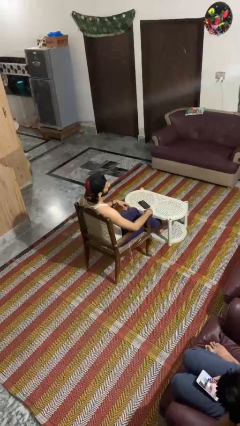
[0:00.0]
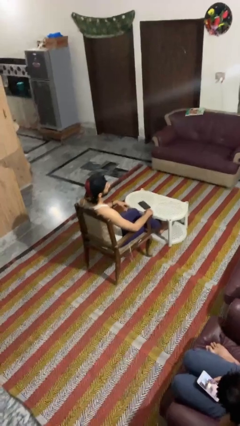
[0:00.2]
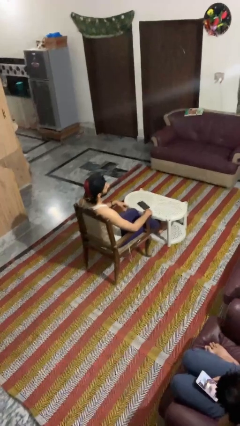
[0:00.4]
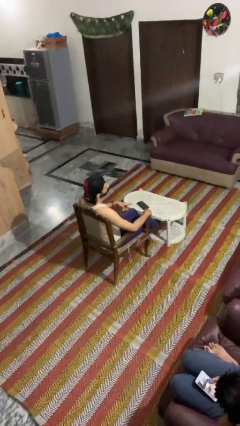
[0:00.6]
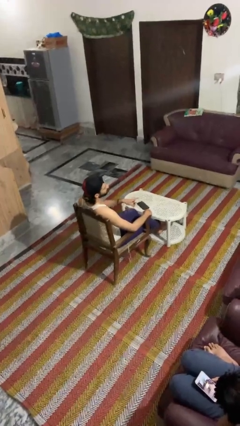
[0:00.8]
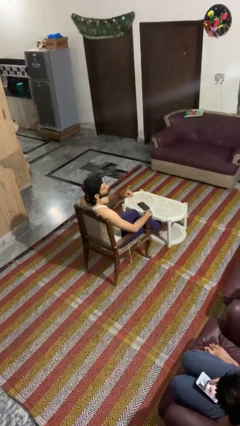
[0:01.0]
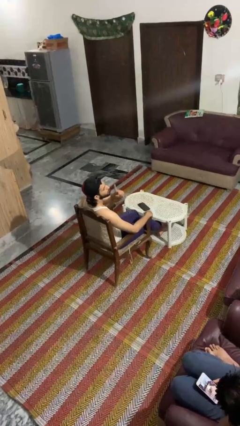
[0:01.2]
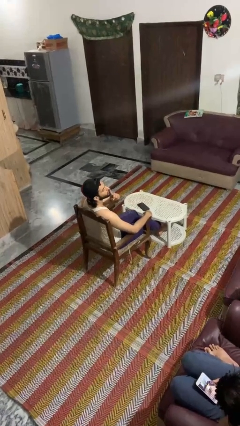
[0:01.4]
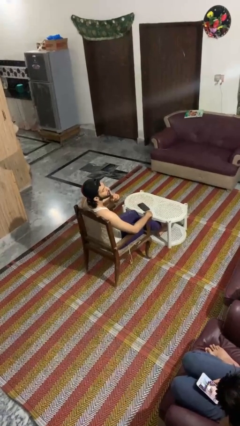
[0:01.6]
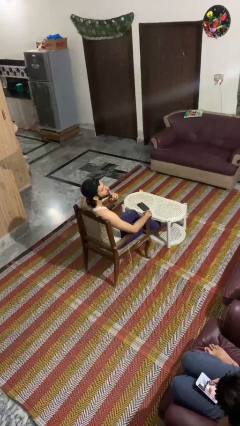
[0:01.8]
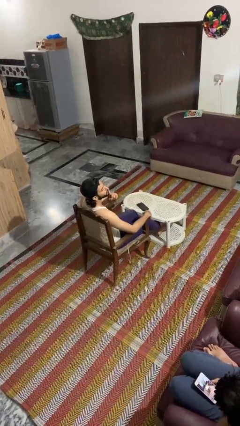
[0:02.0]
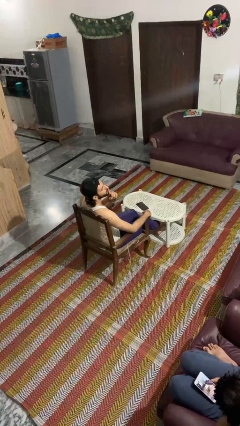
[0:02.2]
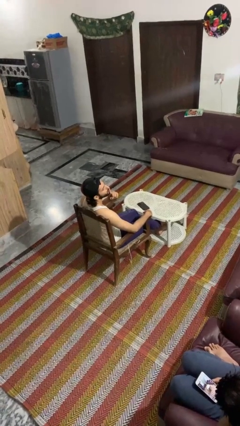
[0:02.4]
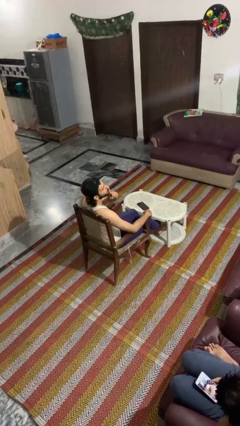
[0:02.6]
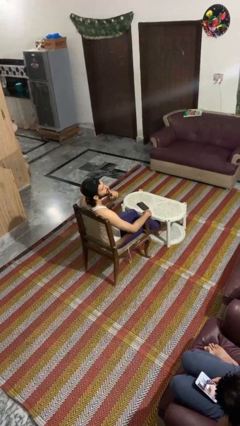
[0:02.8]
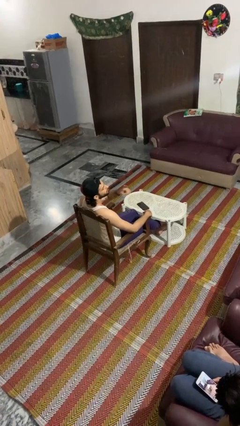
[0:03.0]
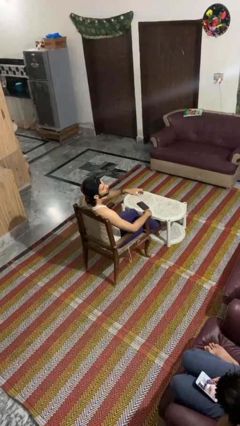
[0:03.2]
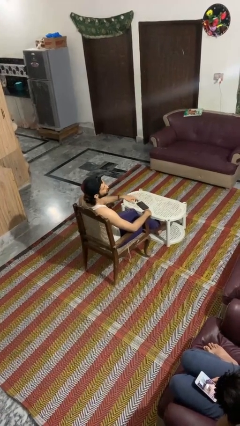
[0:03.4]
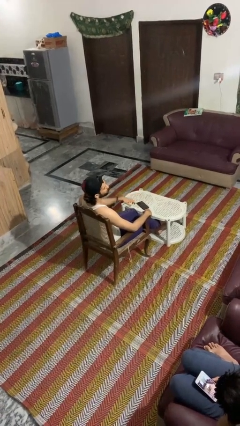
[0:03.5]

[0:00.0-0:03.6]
person gestures be quiet

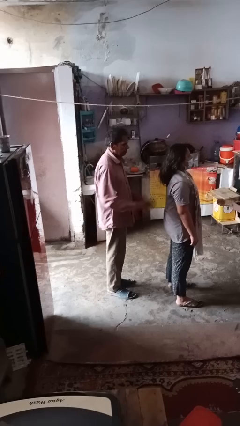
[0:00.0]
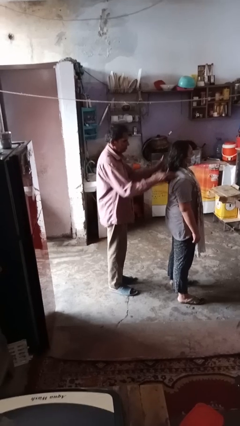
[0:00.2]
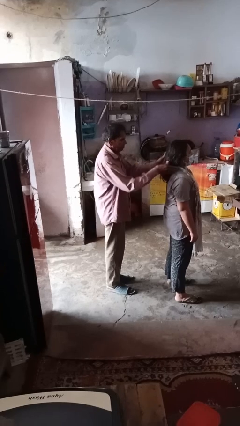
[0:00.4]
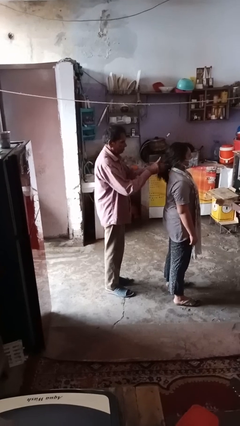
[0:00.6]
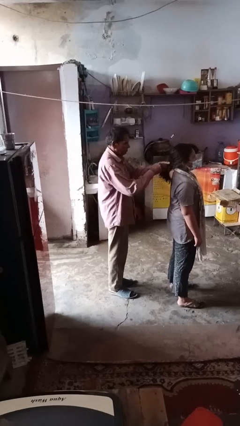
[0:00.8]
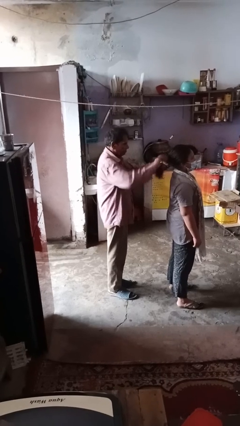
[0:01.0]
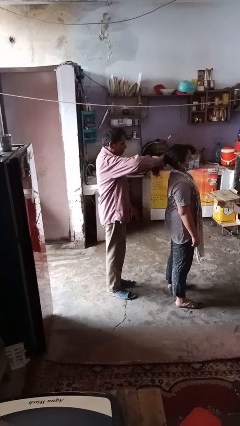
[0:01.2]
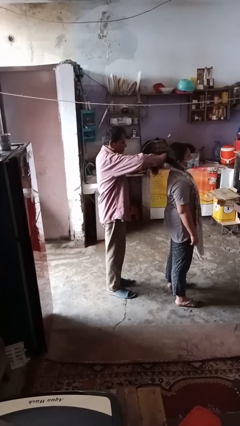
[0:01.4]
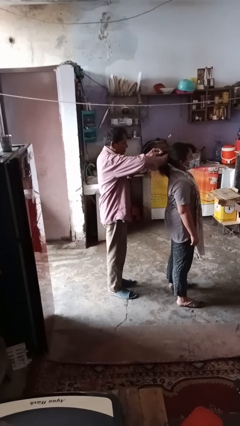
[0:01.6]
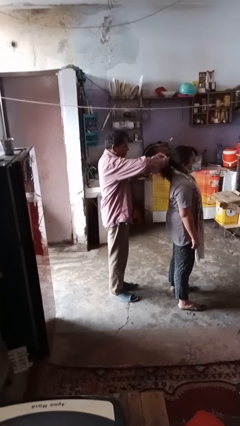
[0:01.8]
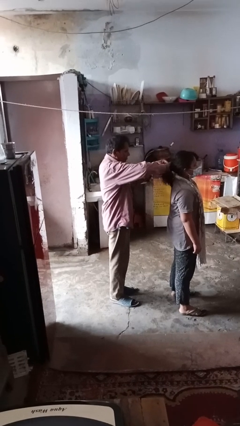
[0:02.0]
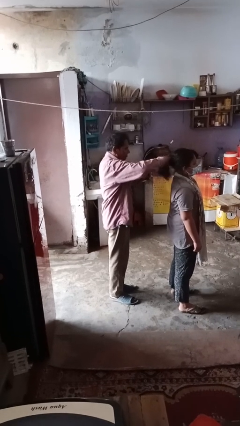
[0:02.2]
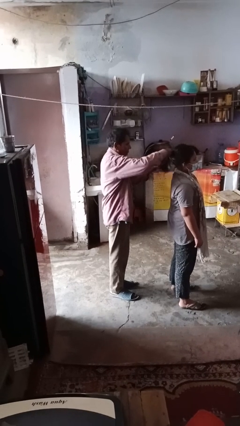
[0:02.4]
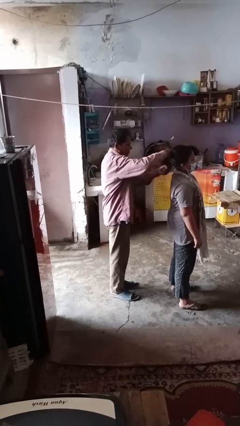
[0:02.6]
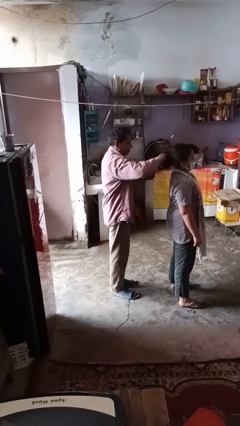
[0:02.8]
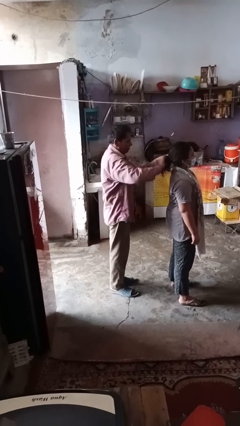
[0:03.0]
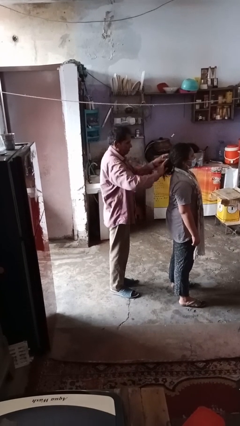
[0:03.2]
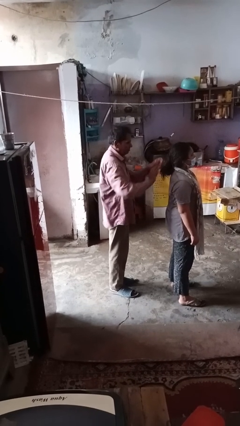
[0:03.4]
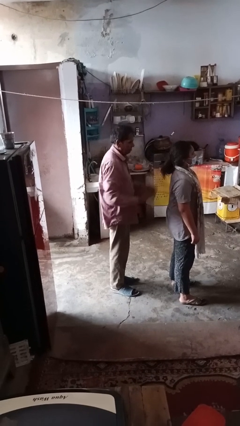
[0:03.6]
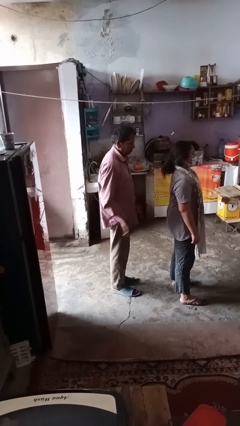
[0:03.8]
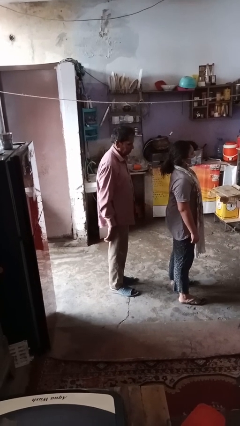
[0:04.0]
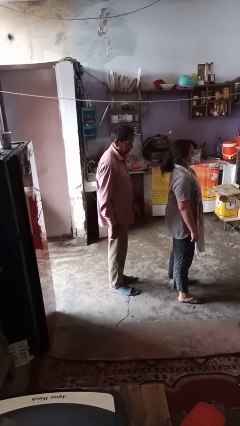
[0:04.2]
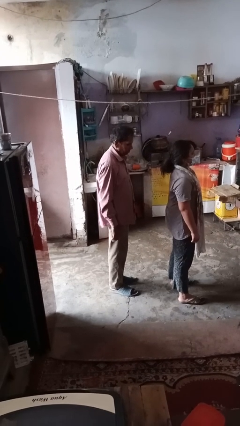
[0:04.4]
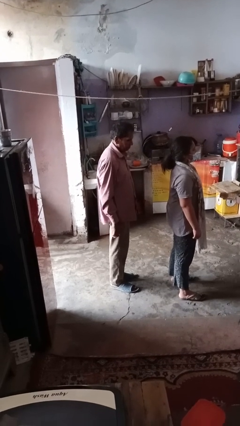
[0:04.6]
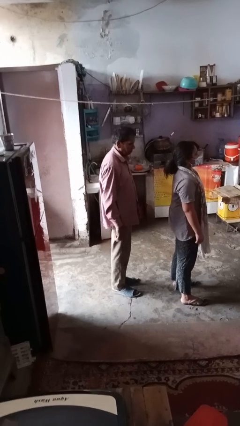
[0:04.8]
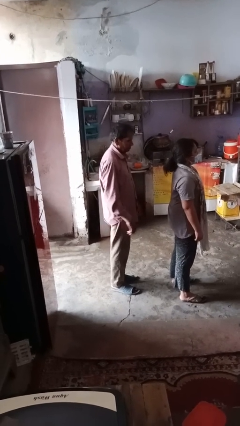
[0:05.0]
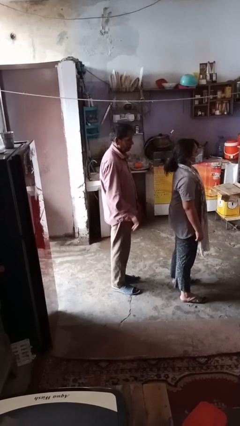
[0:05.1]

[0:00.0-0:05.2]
person braids hair of person

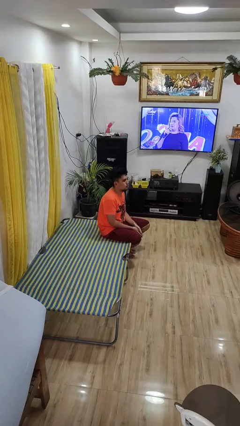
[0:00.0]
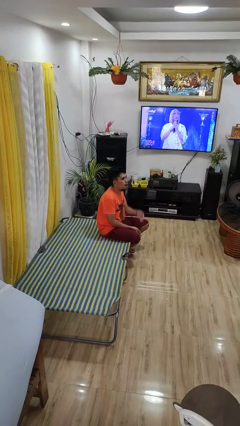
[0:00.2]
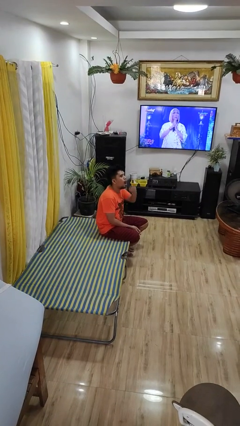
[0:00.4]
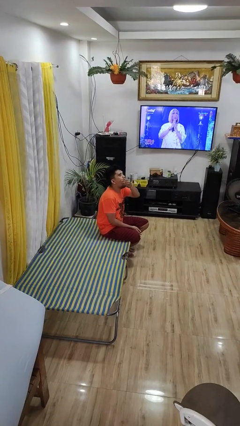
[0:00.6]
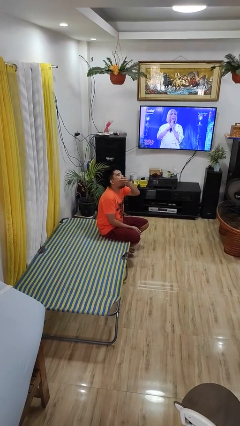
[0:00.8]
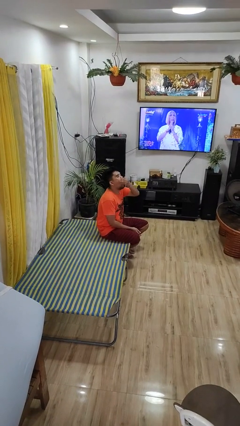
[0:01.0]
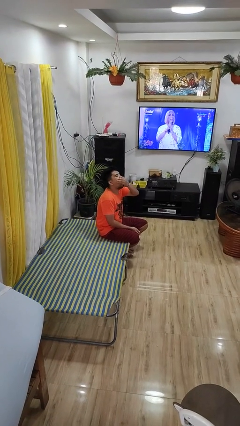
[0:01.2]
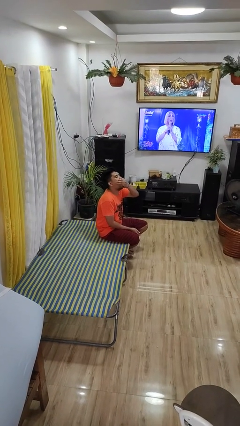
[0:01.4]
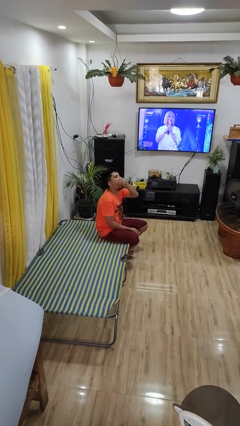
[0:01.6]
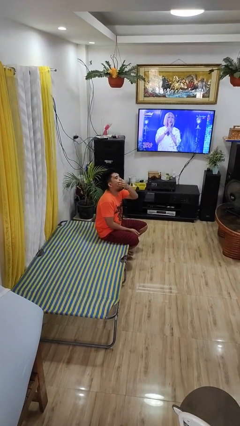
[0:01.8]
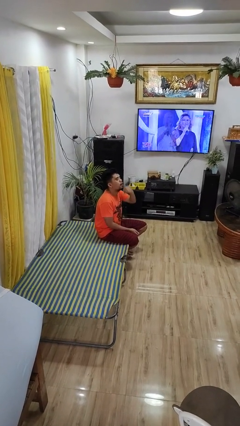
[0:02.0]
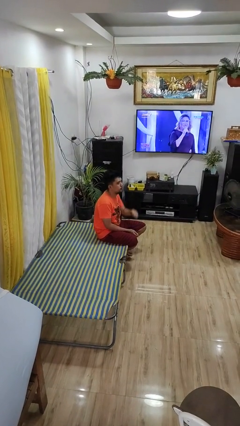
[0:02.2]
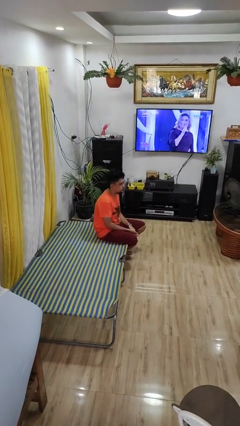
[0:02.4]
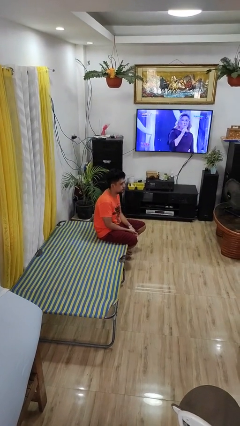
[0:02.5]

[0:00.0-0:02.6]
person yawns

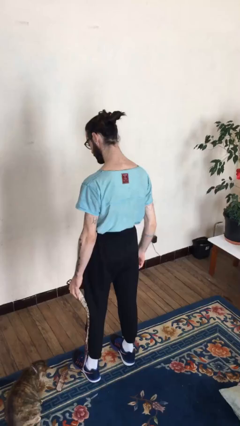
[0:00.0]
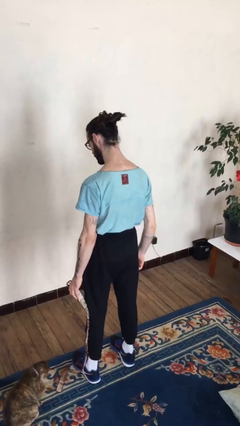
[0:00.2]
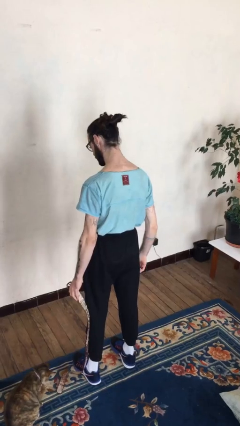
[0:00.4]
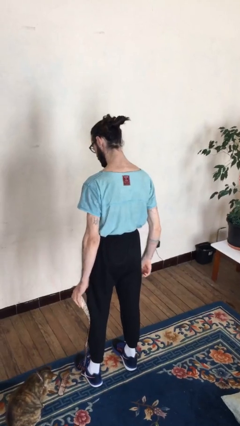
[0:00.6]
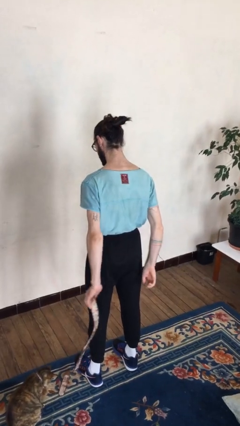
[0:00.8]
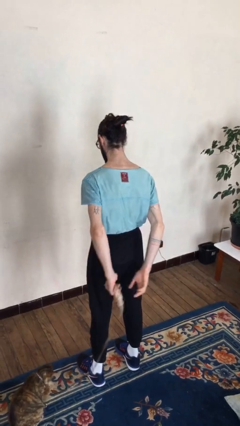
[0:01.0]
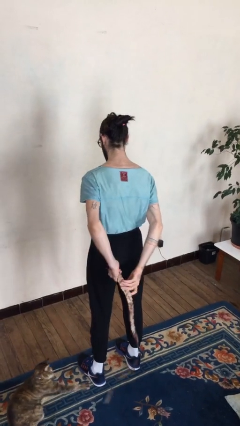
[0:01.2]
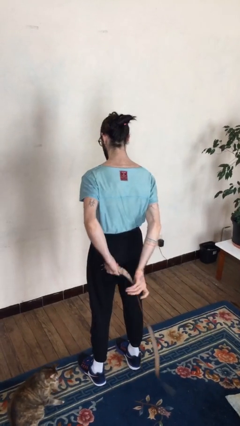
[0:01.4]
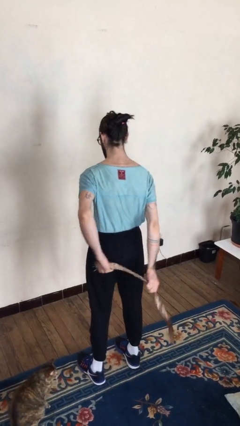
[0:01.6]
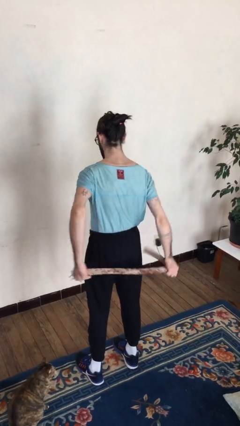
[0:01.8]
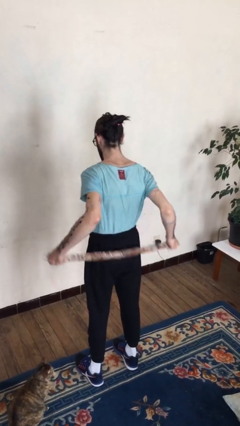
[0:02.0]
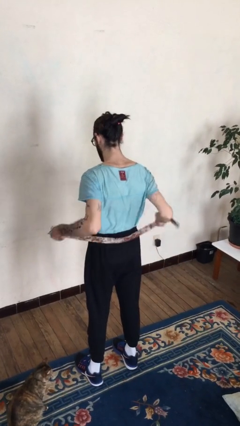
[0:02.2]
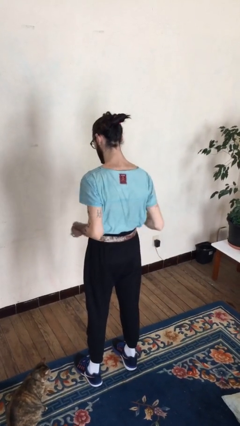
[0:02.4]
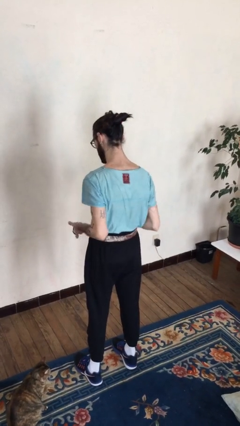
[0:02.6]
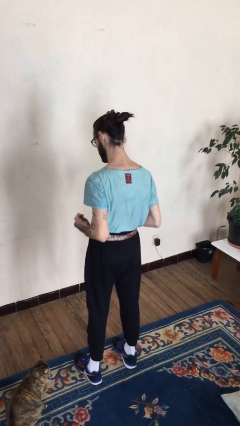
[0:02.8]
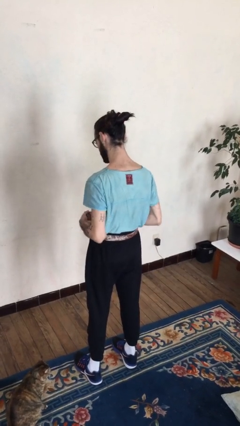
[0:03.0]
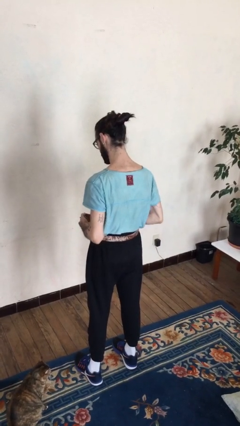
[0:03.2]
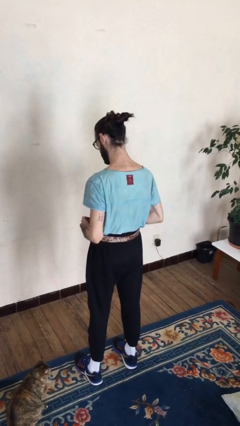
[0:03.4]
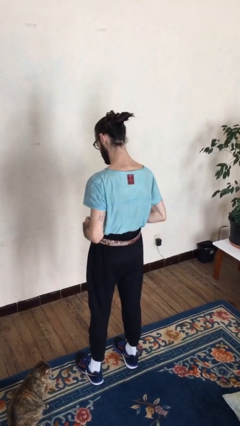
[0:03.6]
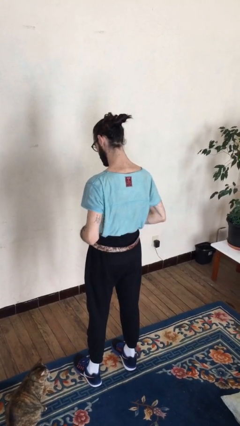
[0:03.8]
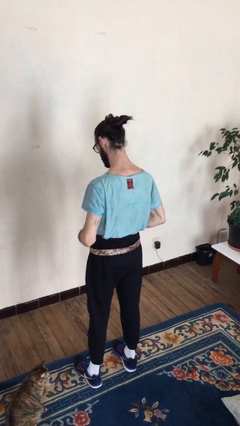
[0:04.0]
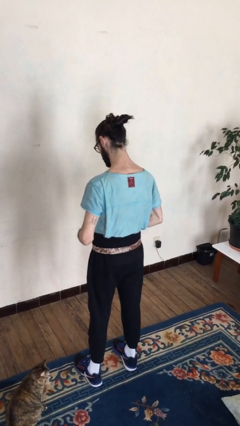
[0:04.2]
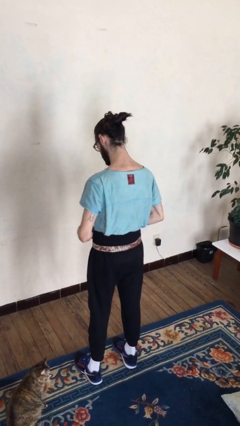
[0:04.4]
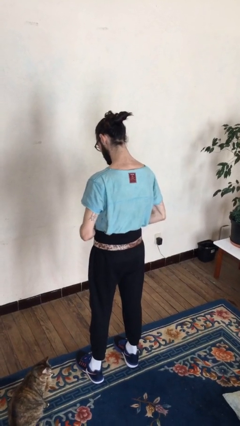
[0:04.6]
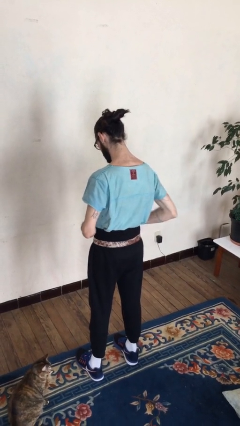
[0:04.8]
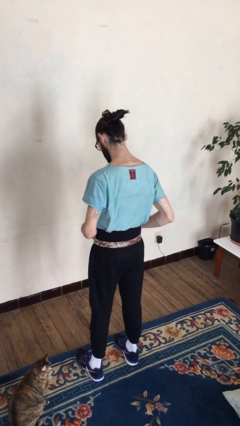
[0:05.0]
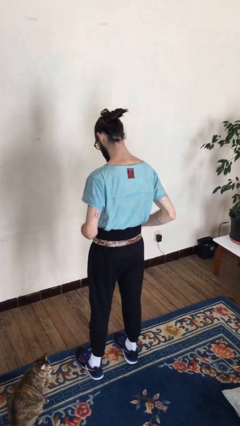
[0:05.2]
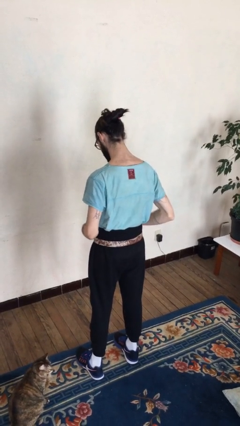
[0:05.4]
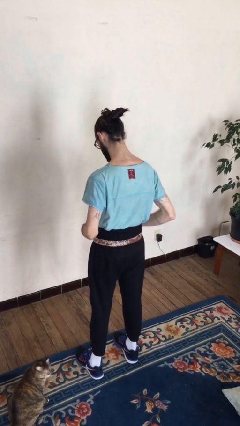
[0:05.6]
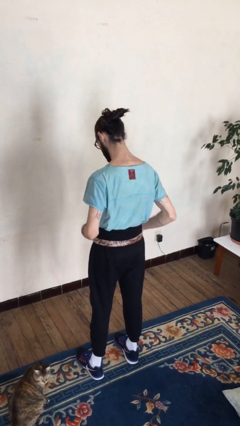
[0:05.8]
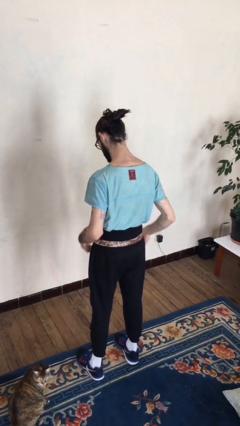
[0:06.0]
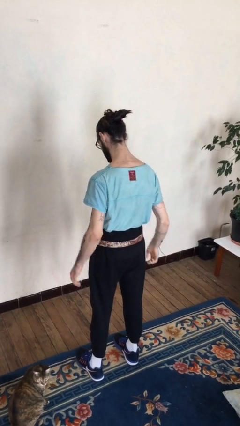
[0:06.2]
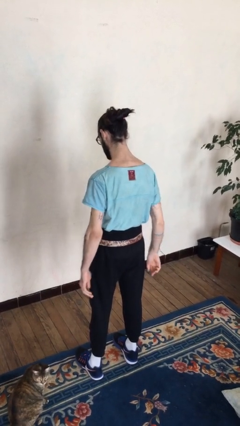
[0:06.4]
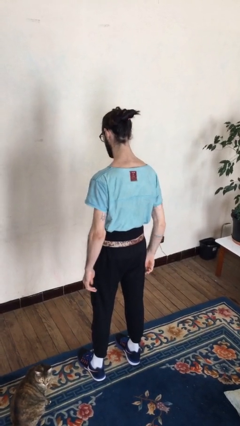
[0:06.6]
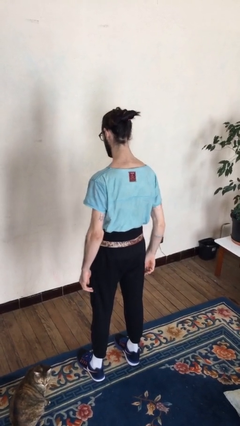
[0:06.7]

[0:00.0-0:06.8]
person puts on belt
